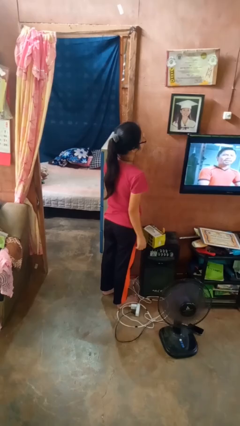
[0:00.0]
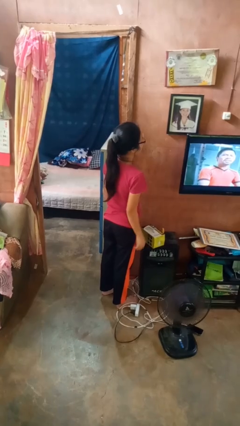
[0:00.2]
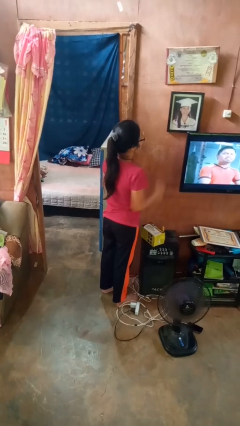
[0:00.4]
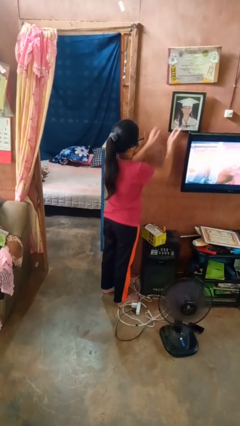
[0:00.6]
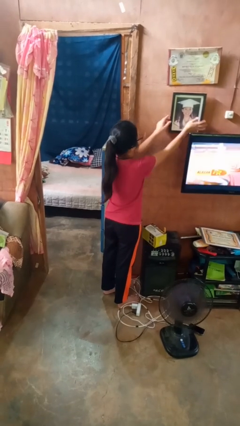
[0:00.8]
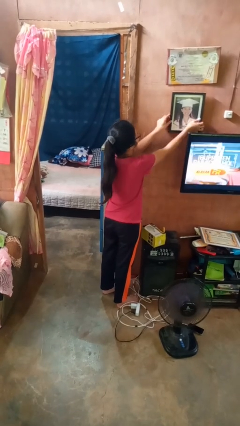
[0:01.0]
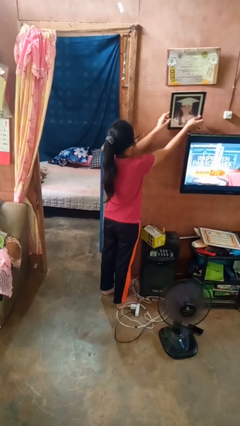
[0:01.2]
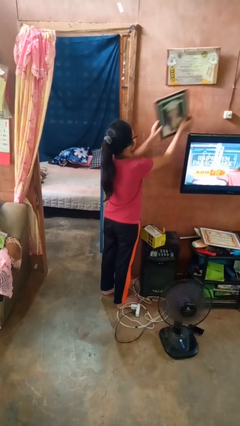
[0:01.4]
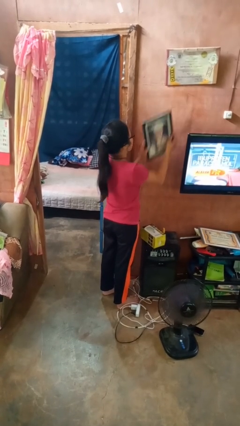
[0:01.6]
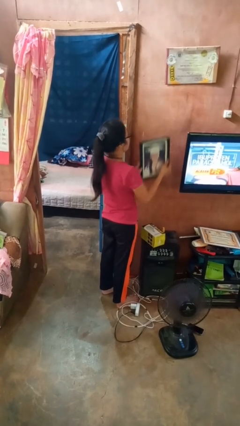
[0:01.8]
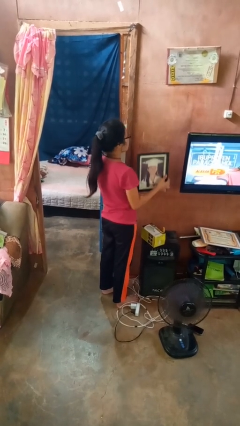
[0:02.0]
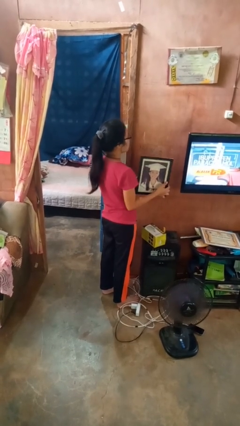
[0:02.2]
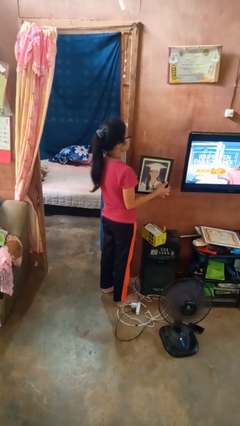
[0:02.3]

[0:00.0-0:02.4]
person takes down picture frame

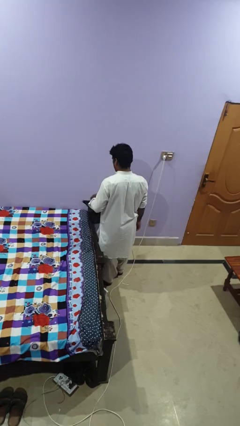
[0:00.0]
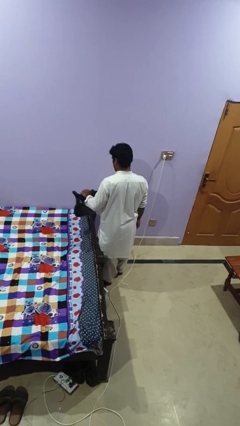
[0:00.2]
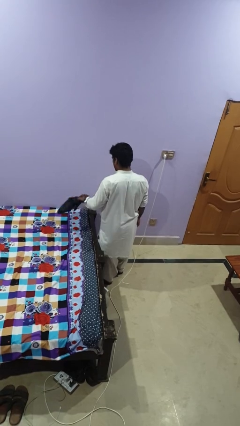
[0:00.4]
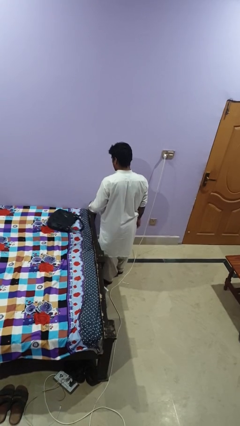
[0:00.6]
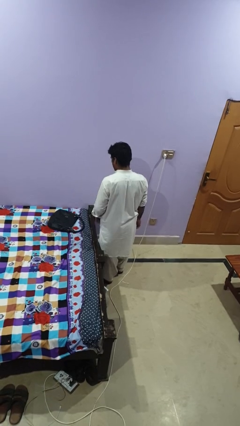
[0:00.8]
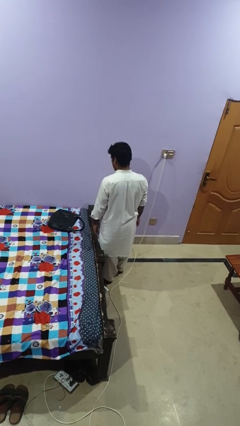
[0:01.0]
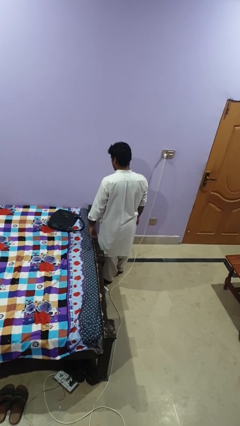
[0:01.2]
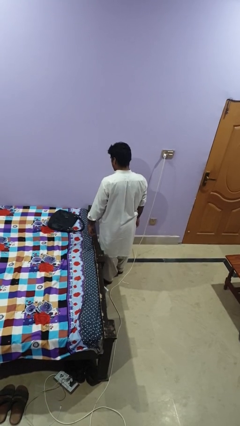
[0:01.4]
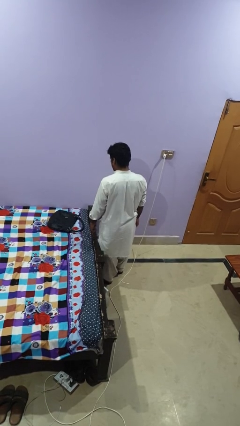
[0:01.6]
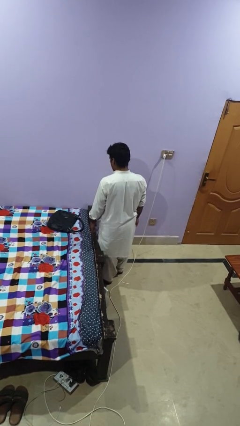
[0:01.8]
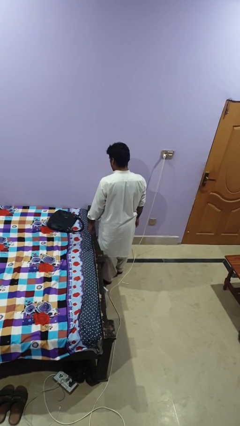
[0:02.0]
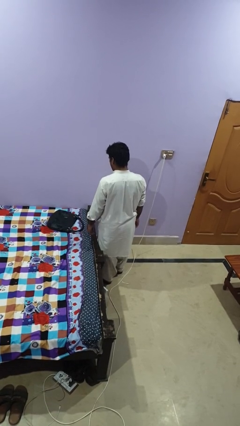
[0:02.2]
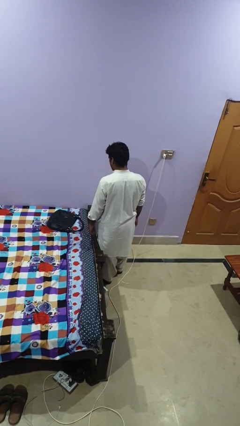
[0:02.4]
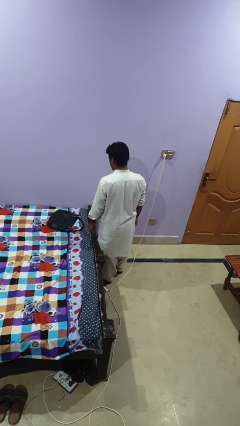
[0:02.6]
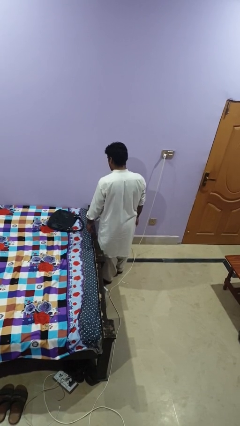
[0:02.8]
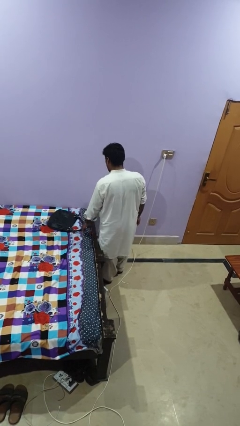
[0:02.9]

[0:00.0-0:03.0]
person throws object on bed

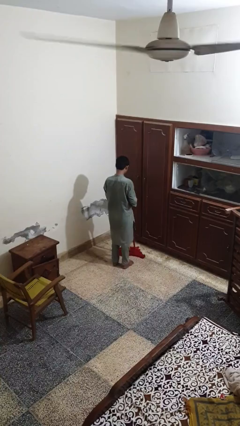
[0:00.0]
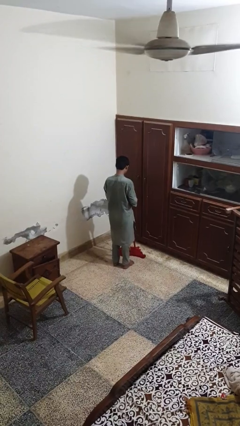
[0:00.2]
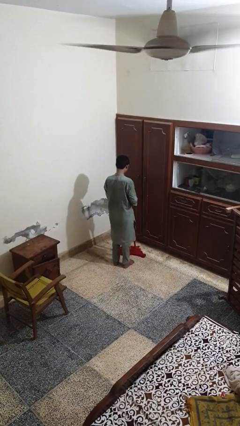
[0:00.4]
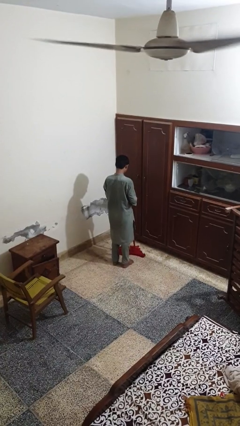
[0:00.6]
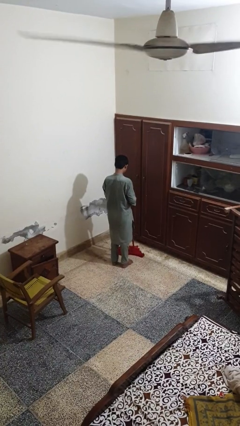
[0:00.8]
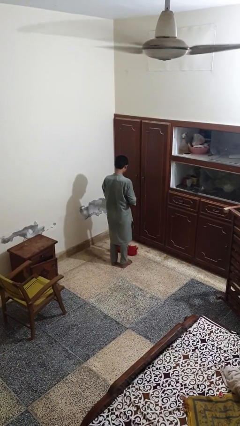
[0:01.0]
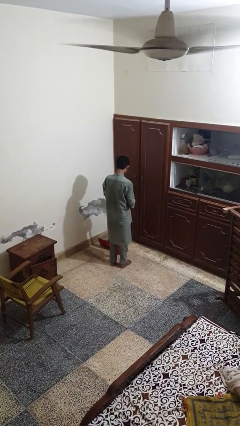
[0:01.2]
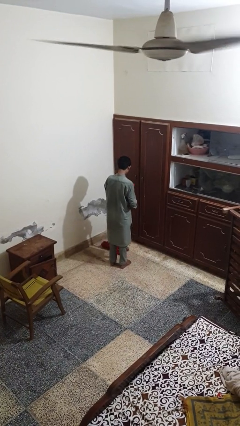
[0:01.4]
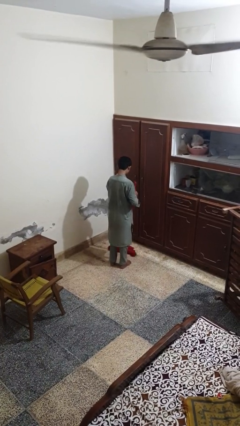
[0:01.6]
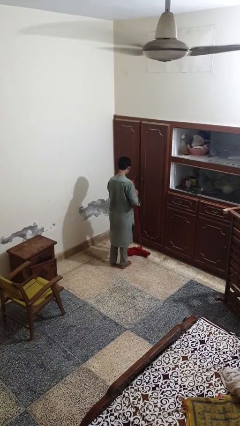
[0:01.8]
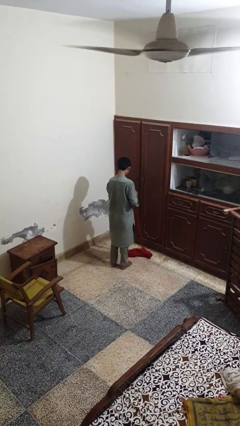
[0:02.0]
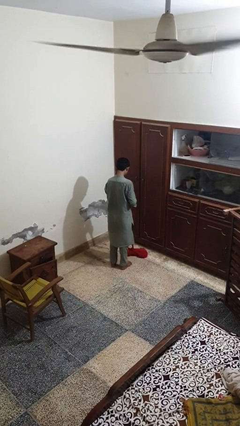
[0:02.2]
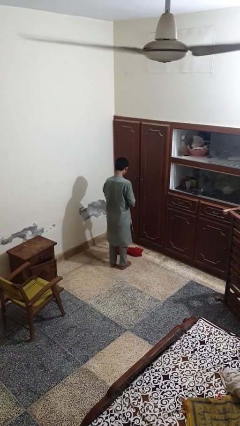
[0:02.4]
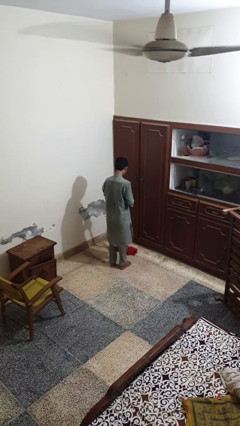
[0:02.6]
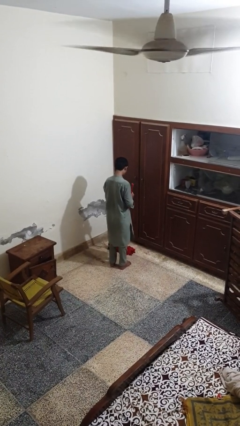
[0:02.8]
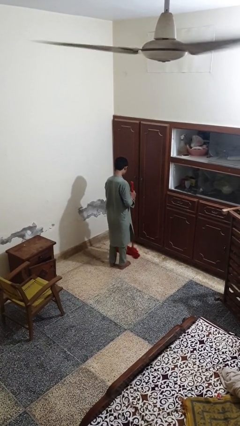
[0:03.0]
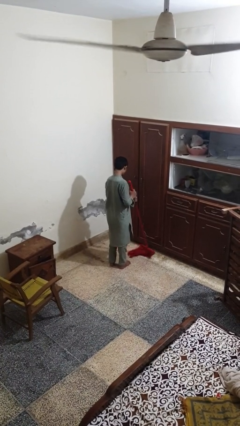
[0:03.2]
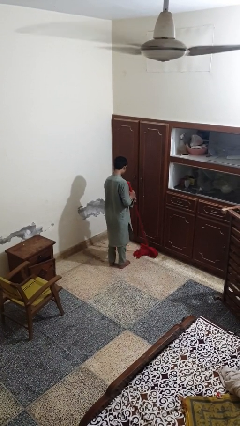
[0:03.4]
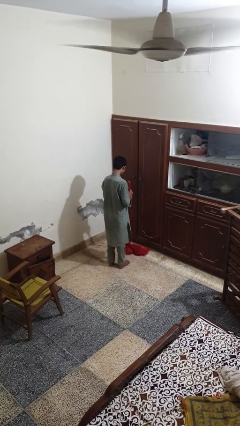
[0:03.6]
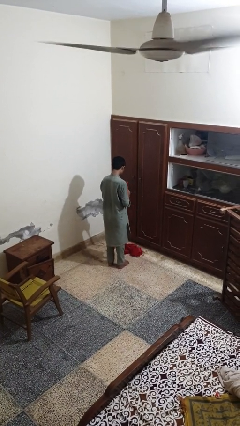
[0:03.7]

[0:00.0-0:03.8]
person mops

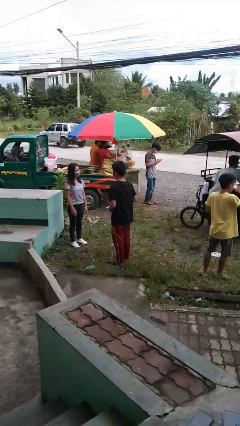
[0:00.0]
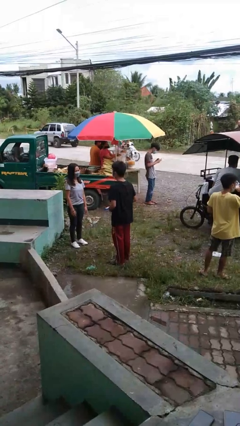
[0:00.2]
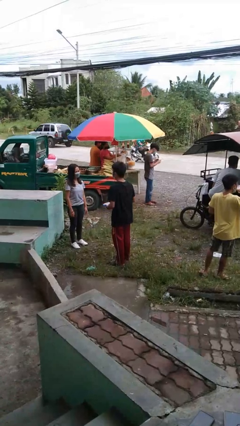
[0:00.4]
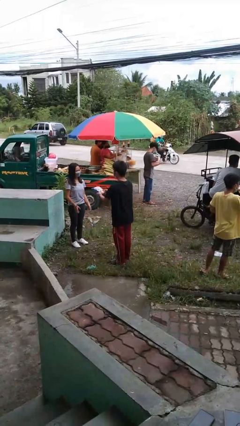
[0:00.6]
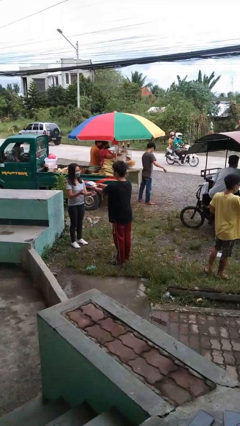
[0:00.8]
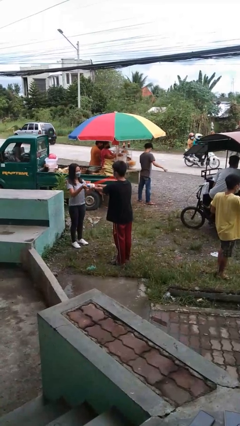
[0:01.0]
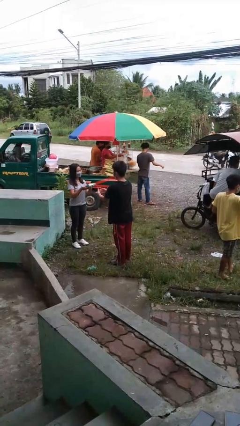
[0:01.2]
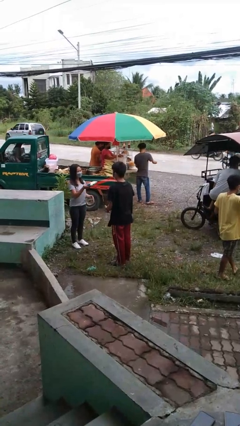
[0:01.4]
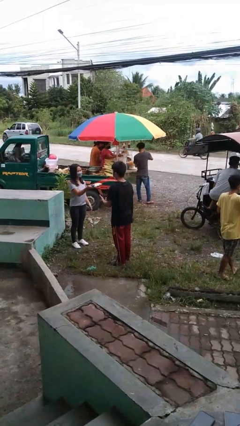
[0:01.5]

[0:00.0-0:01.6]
person transfers object to person

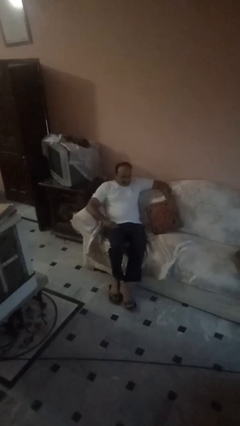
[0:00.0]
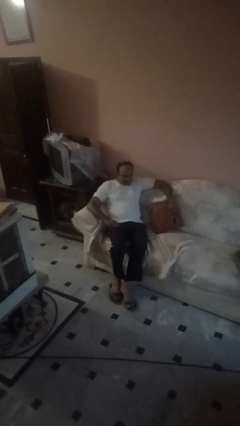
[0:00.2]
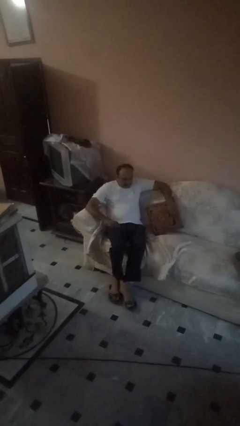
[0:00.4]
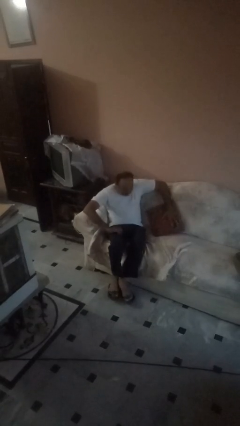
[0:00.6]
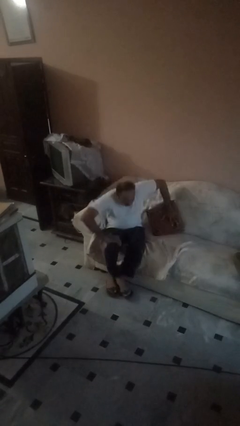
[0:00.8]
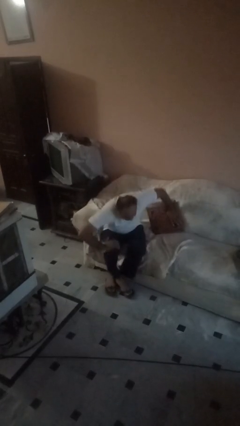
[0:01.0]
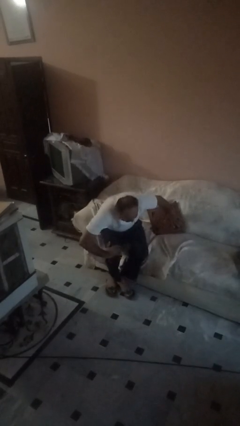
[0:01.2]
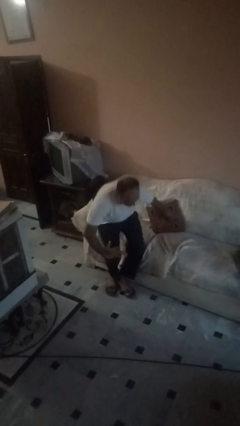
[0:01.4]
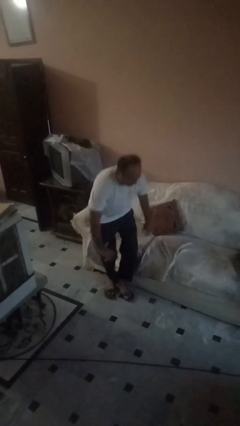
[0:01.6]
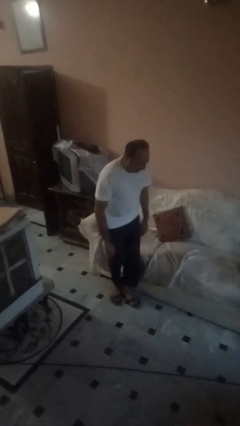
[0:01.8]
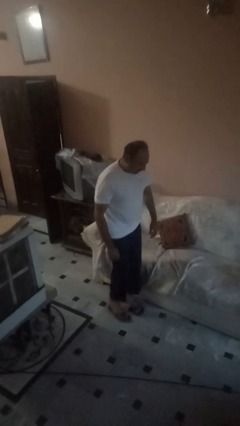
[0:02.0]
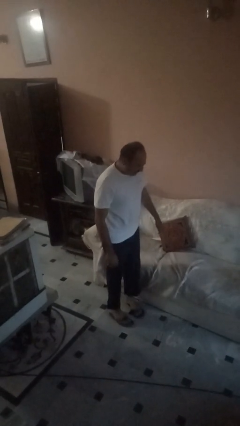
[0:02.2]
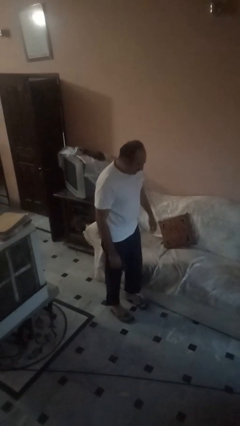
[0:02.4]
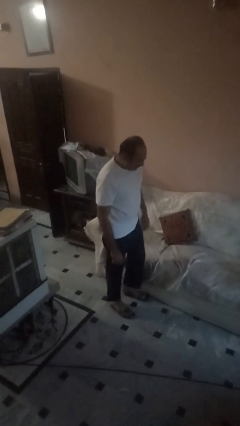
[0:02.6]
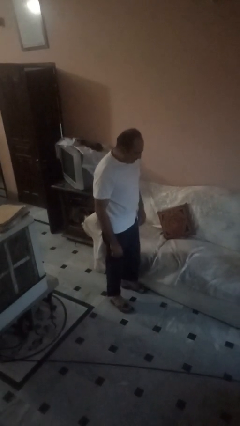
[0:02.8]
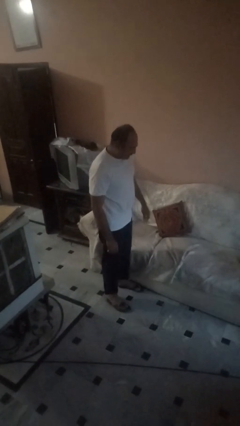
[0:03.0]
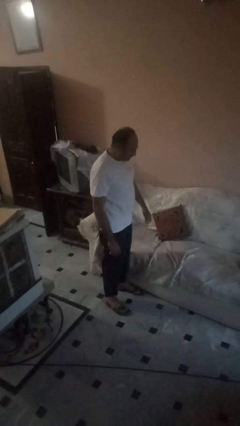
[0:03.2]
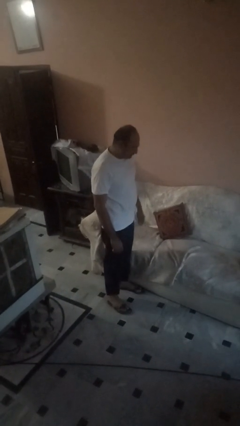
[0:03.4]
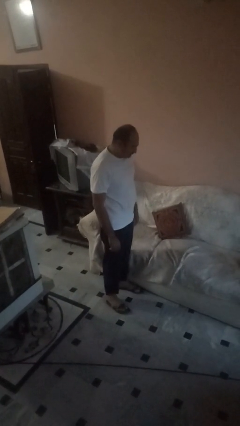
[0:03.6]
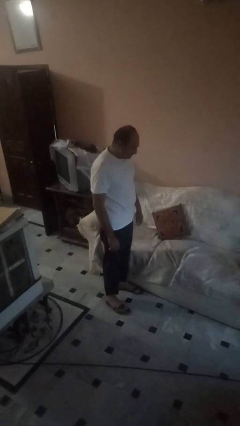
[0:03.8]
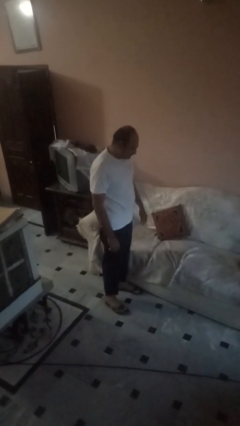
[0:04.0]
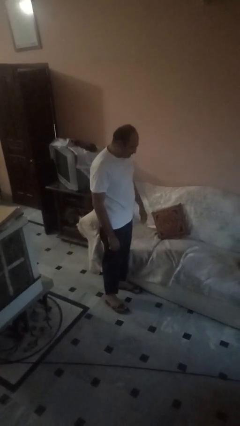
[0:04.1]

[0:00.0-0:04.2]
person stands up

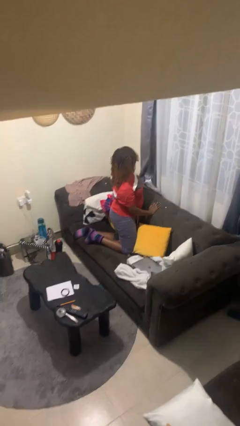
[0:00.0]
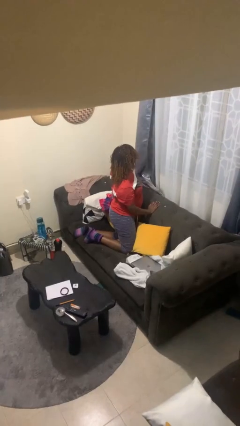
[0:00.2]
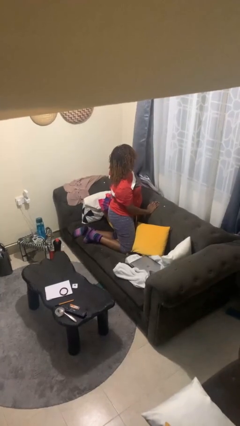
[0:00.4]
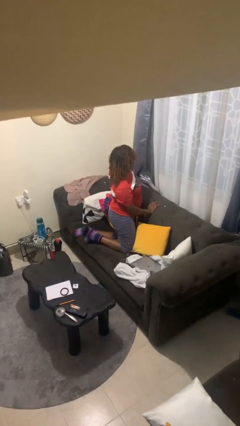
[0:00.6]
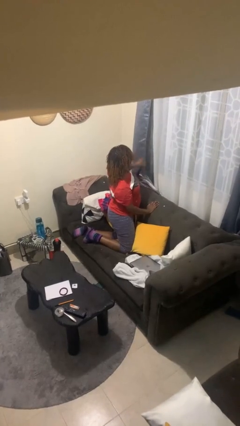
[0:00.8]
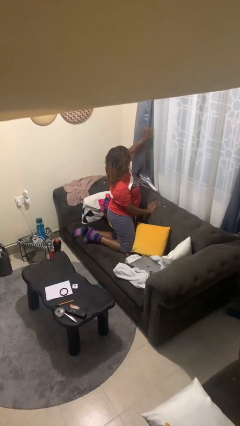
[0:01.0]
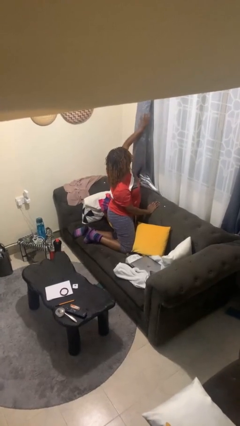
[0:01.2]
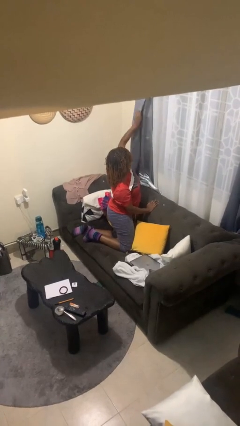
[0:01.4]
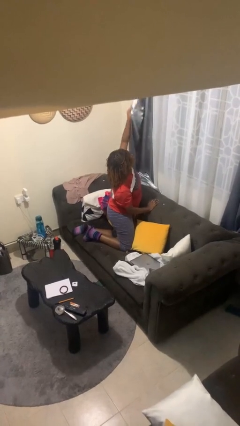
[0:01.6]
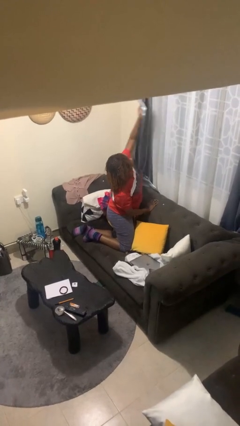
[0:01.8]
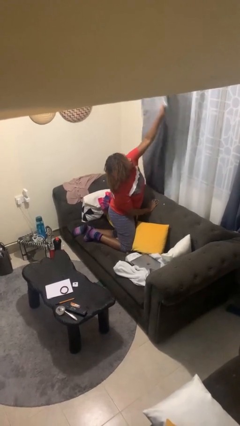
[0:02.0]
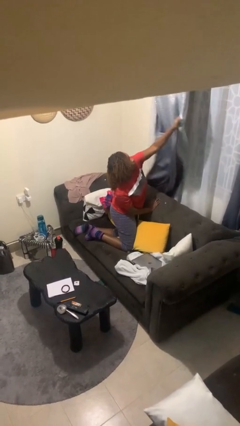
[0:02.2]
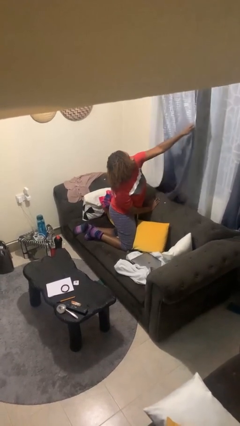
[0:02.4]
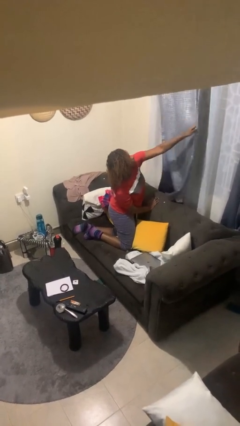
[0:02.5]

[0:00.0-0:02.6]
person closes curtains
